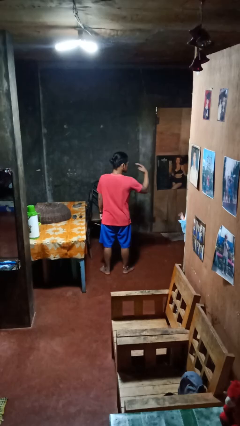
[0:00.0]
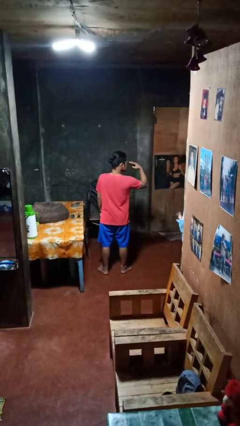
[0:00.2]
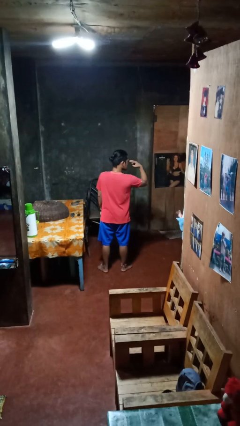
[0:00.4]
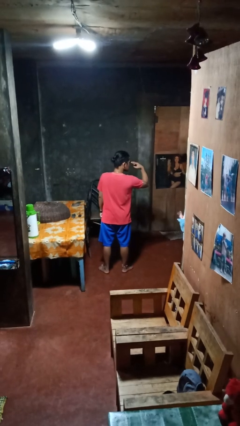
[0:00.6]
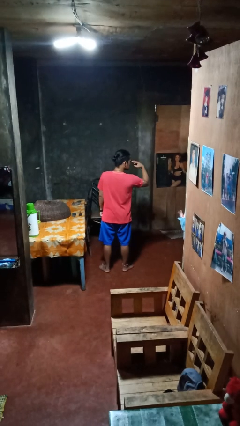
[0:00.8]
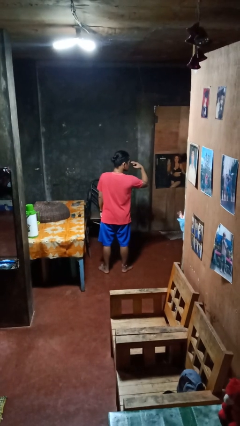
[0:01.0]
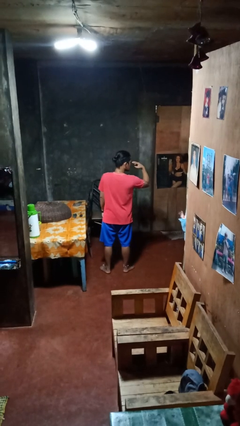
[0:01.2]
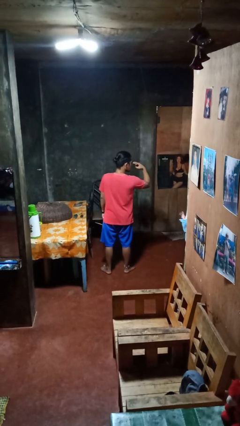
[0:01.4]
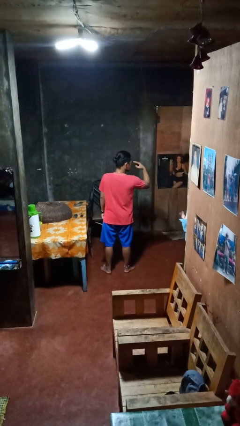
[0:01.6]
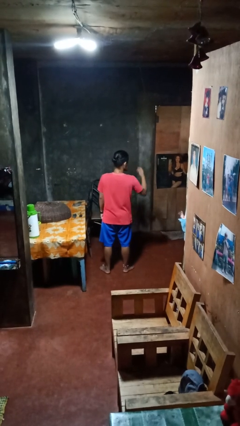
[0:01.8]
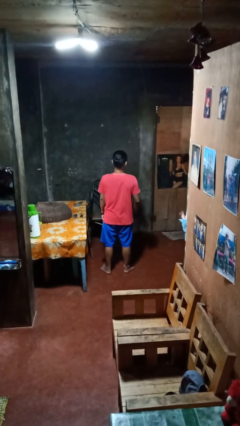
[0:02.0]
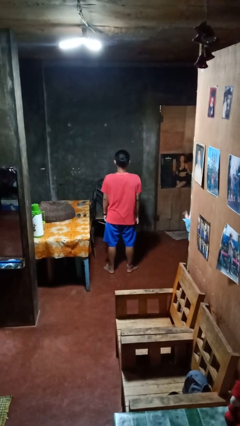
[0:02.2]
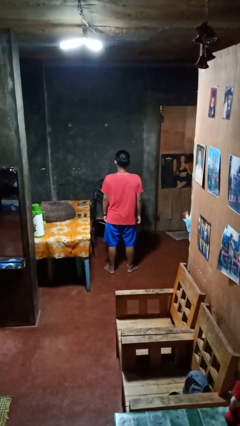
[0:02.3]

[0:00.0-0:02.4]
person gestures watch closely

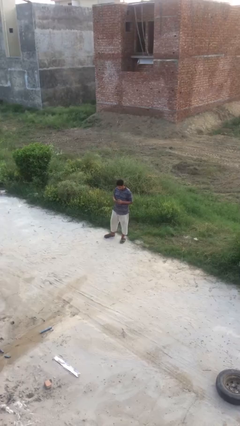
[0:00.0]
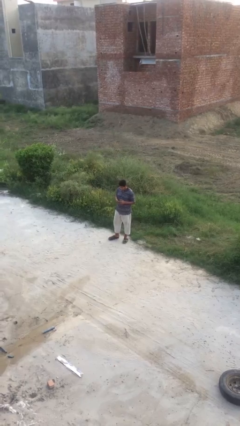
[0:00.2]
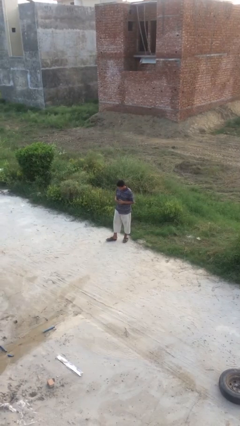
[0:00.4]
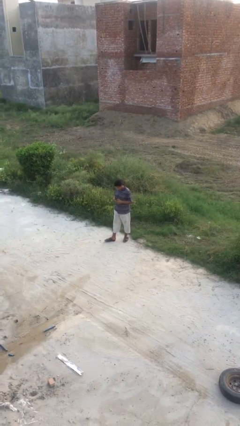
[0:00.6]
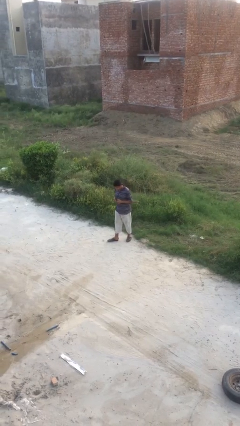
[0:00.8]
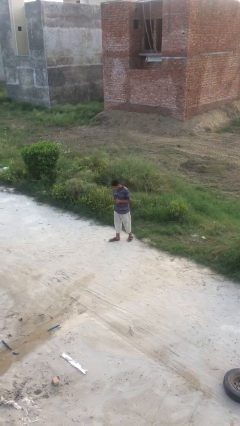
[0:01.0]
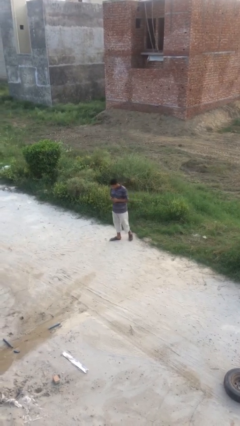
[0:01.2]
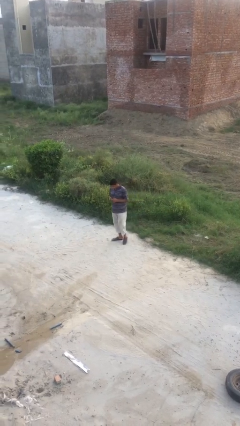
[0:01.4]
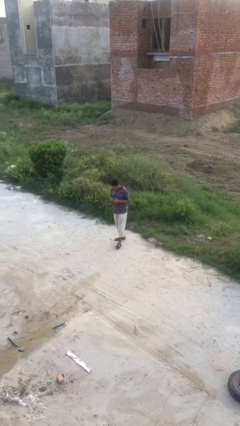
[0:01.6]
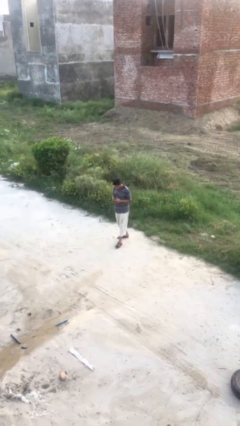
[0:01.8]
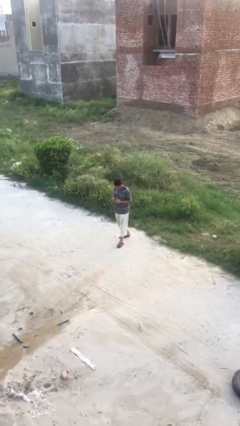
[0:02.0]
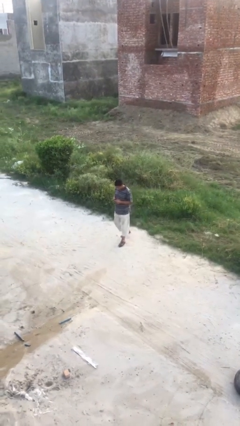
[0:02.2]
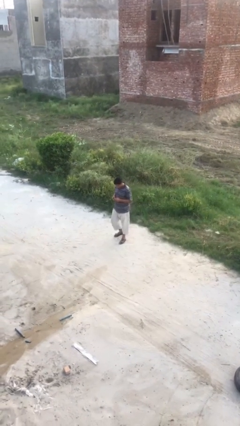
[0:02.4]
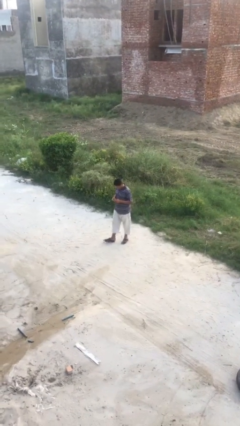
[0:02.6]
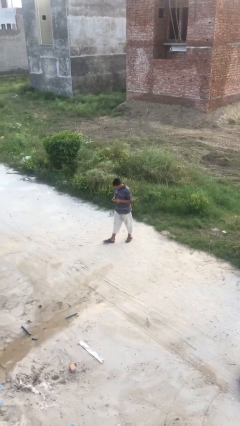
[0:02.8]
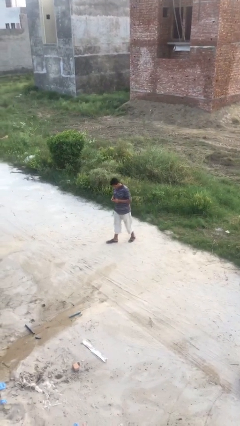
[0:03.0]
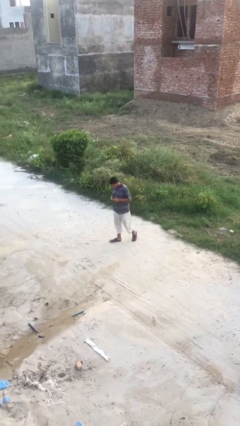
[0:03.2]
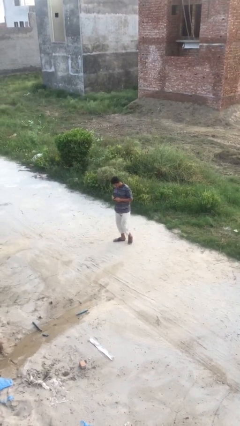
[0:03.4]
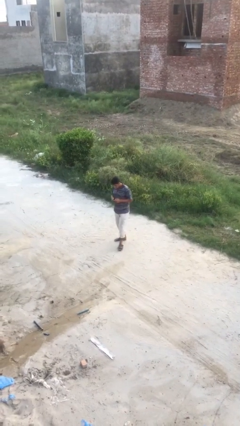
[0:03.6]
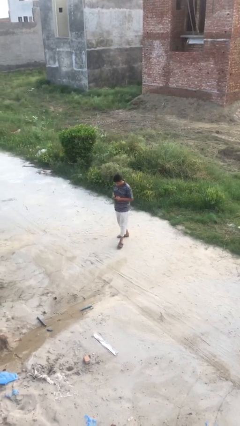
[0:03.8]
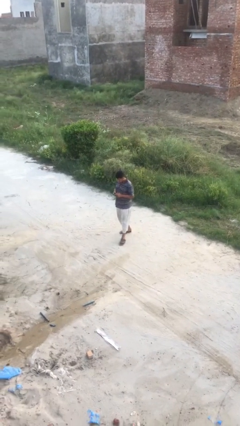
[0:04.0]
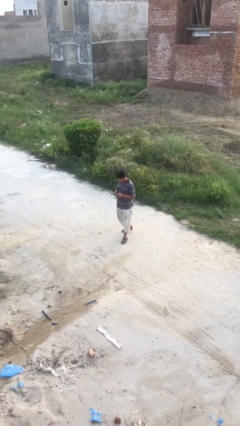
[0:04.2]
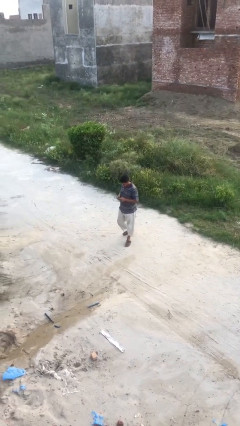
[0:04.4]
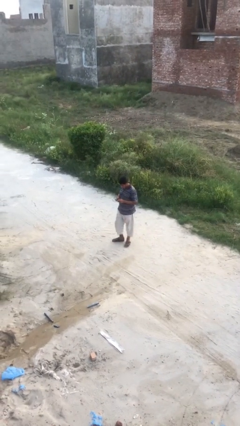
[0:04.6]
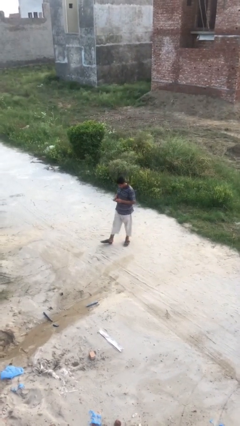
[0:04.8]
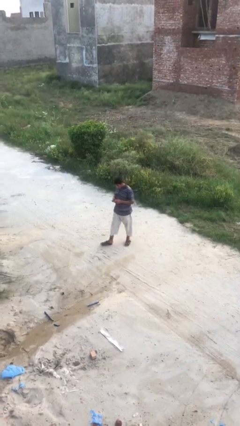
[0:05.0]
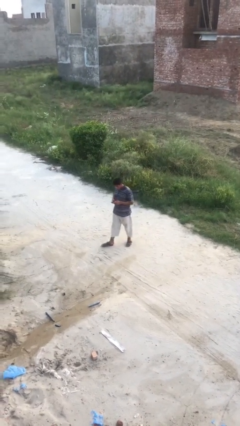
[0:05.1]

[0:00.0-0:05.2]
person texts on phone

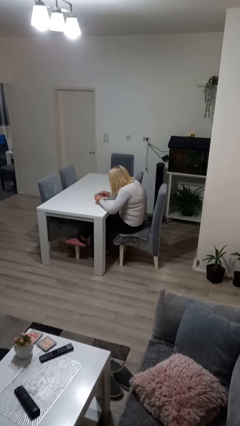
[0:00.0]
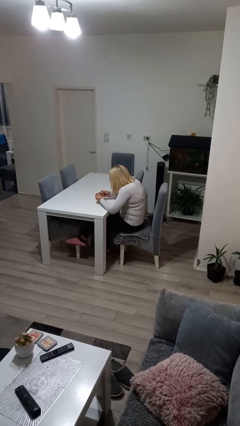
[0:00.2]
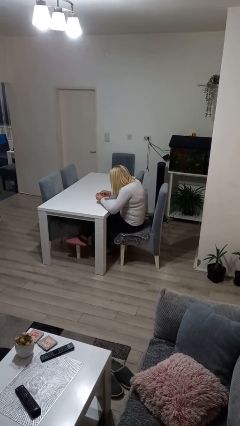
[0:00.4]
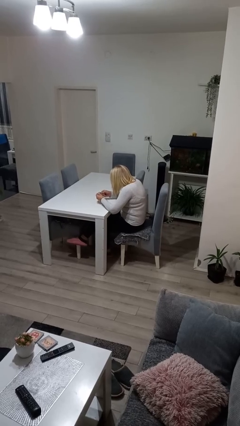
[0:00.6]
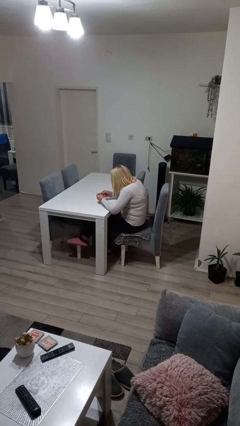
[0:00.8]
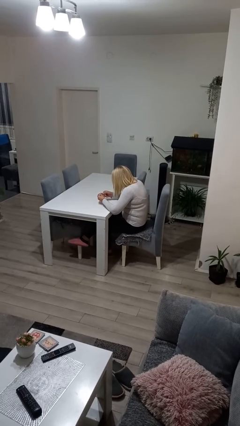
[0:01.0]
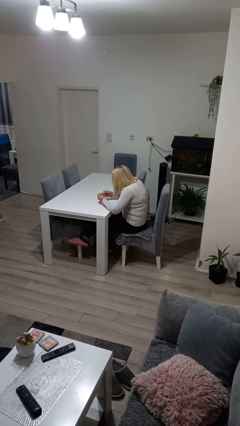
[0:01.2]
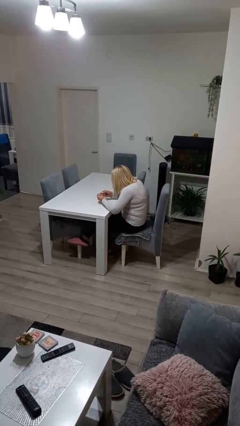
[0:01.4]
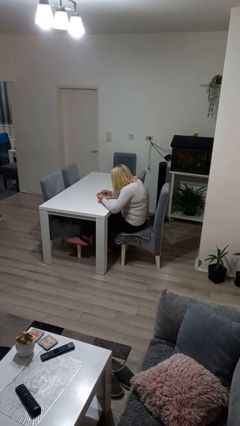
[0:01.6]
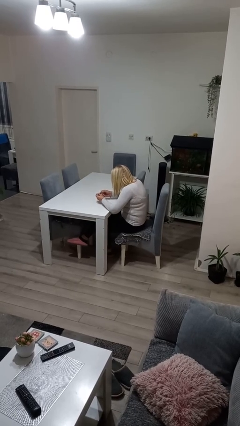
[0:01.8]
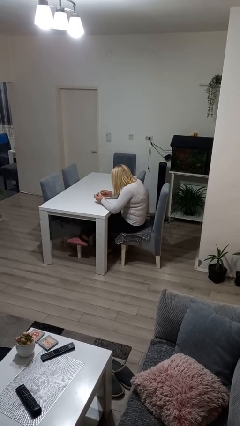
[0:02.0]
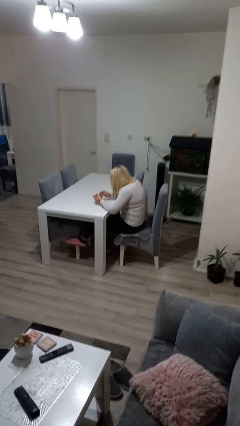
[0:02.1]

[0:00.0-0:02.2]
person clips fingernails

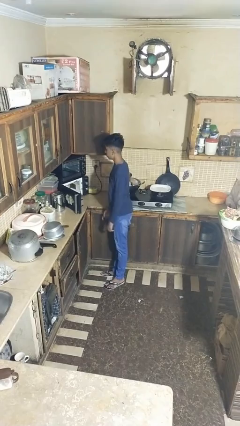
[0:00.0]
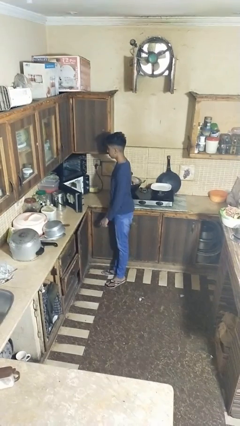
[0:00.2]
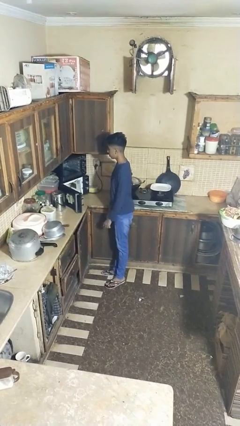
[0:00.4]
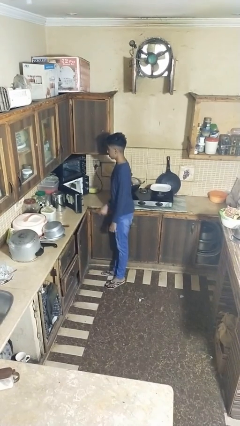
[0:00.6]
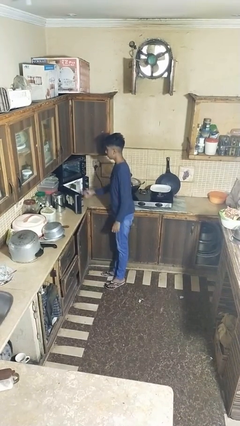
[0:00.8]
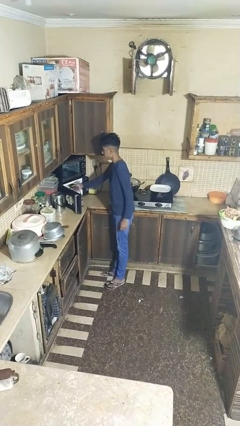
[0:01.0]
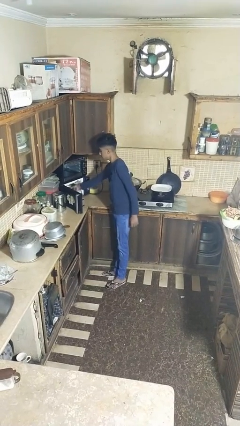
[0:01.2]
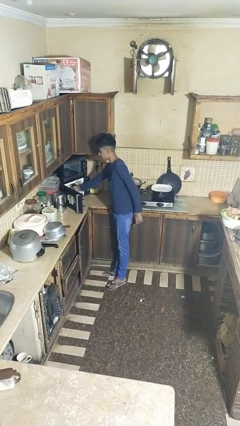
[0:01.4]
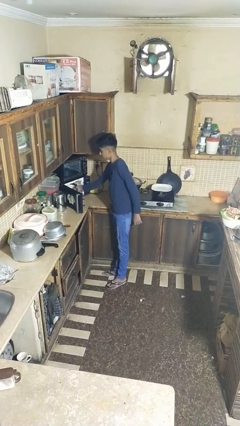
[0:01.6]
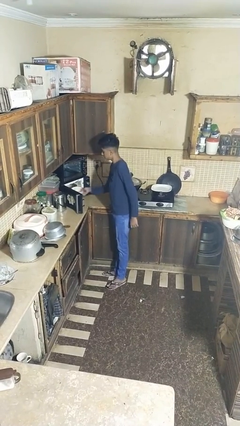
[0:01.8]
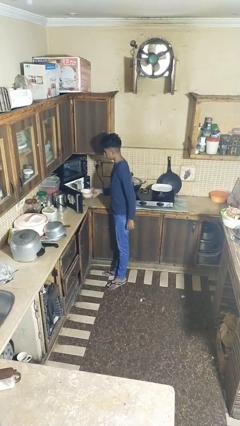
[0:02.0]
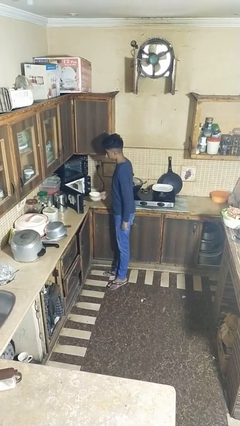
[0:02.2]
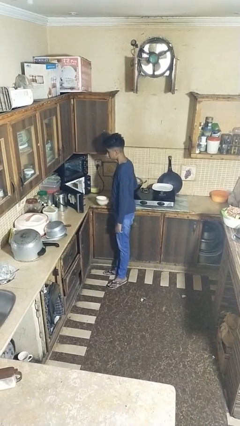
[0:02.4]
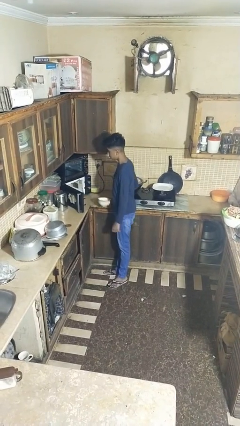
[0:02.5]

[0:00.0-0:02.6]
person takes object from microwave

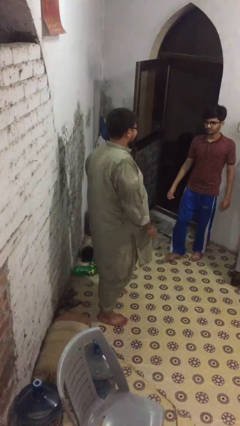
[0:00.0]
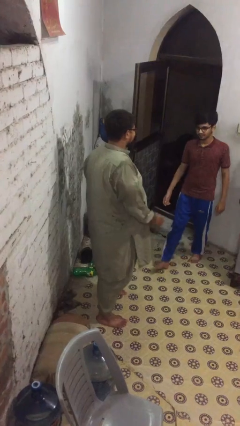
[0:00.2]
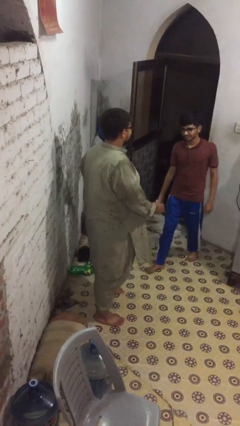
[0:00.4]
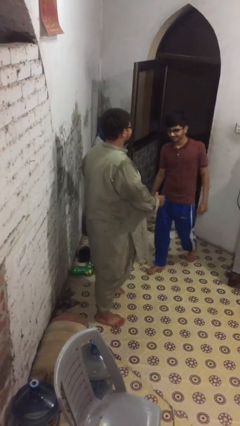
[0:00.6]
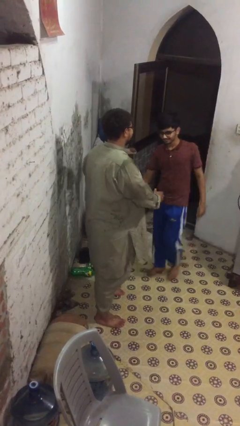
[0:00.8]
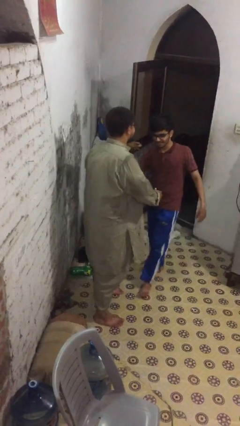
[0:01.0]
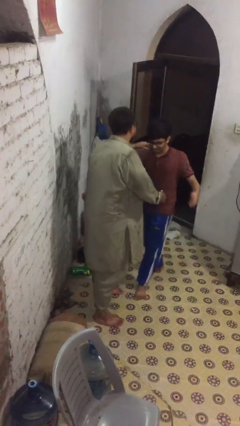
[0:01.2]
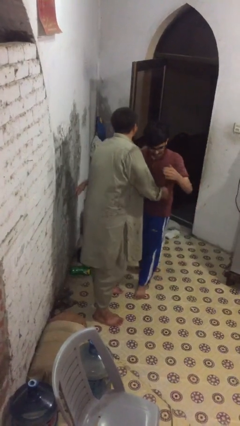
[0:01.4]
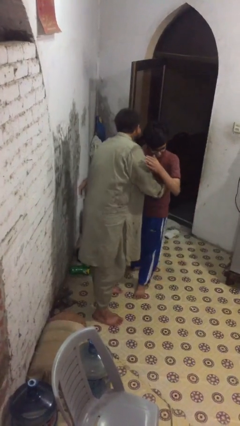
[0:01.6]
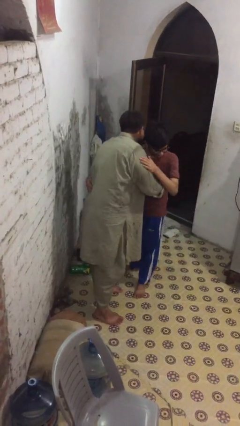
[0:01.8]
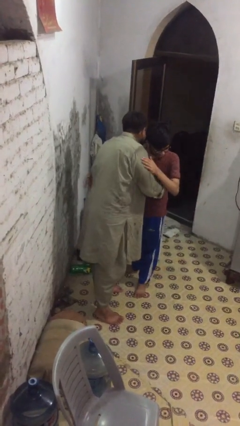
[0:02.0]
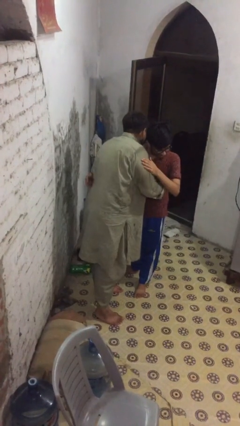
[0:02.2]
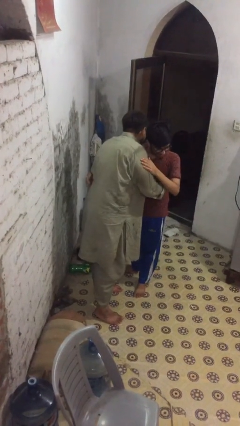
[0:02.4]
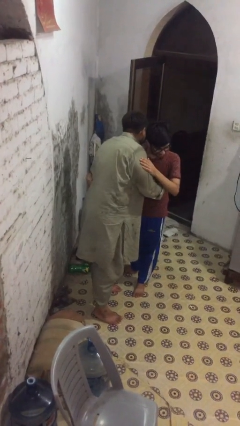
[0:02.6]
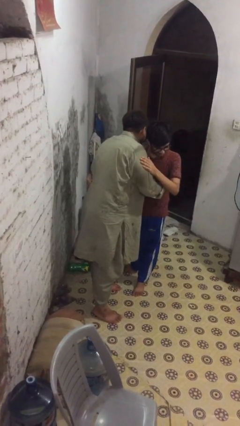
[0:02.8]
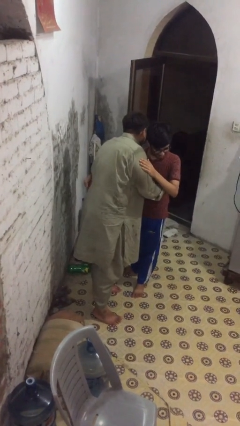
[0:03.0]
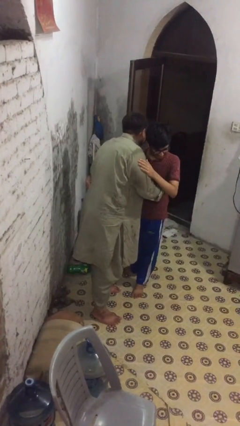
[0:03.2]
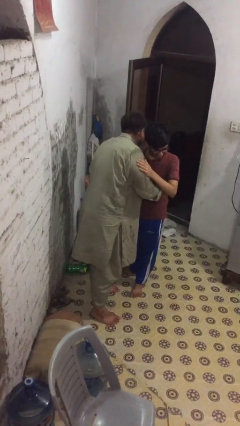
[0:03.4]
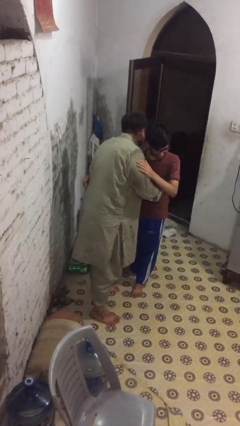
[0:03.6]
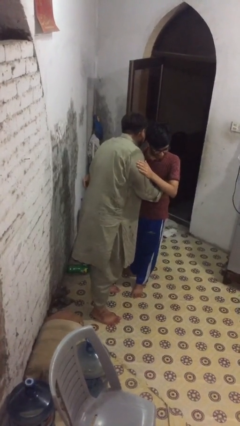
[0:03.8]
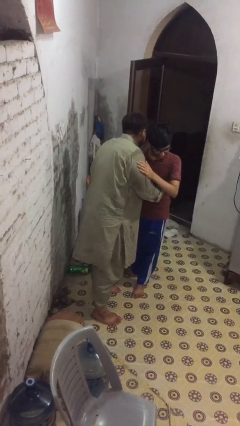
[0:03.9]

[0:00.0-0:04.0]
person embraces person

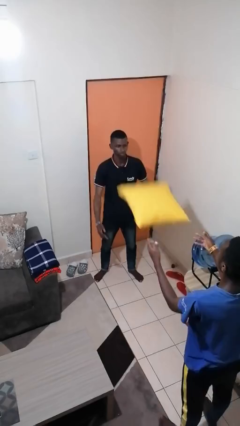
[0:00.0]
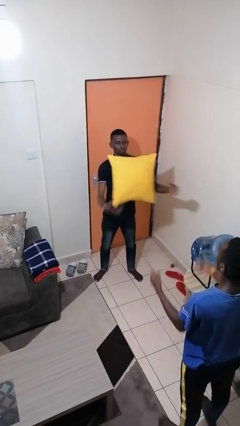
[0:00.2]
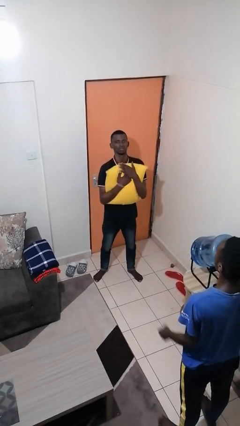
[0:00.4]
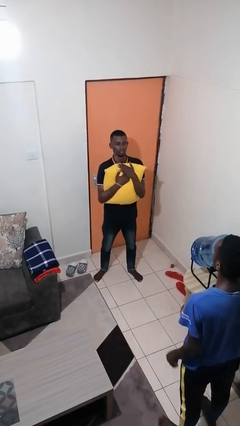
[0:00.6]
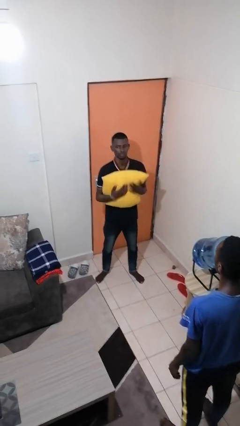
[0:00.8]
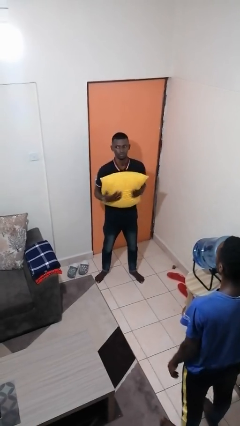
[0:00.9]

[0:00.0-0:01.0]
person catches object from person
